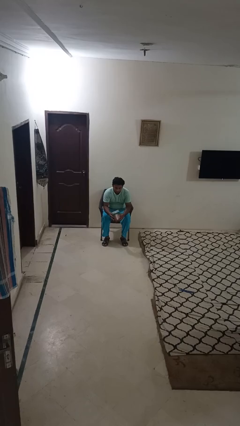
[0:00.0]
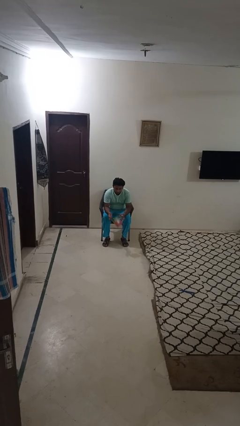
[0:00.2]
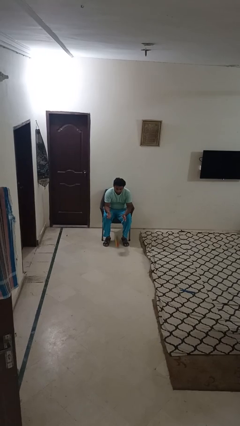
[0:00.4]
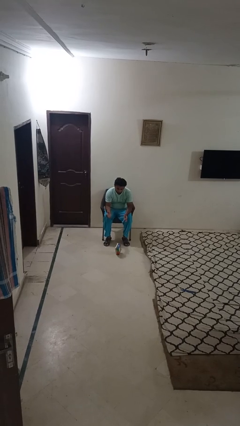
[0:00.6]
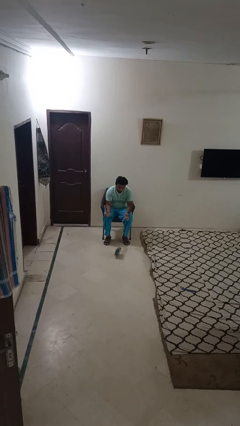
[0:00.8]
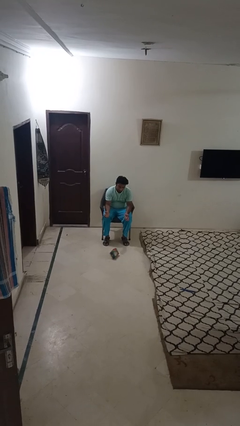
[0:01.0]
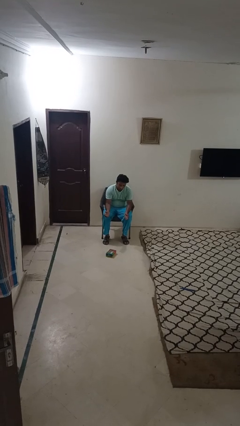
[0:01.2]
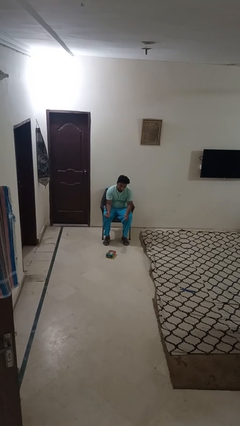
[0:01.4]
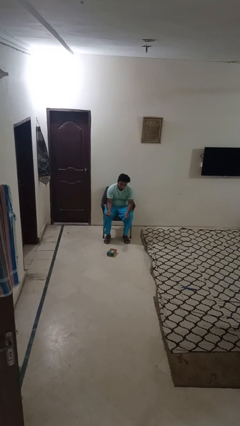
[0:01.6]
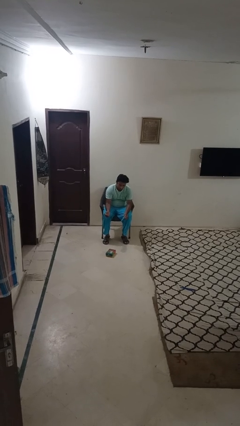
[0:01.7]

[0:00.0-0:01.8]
person drops object

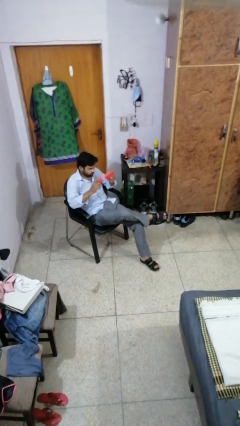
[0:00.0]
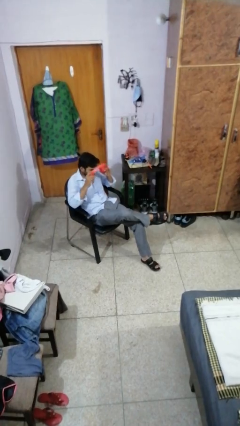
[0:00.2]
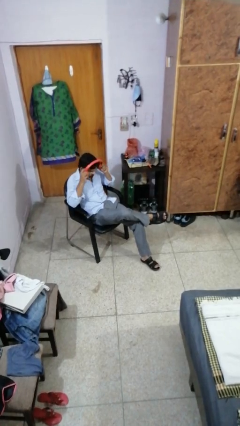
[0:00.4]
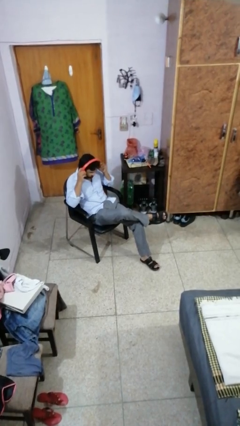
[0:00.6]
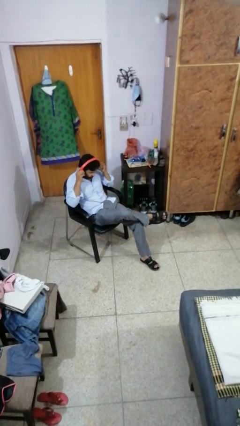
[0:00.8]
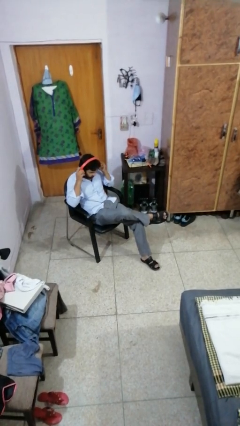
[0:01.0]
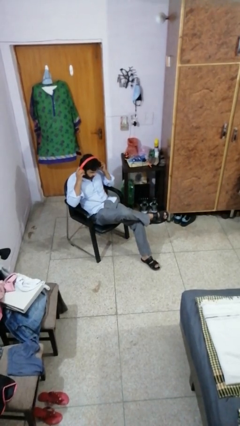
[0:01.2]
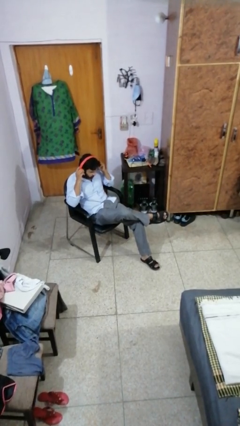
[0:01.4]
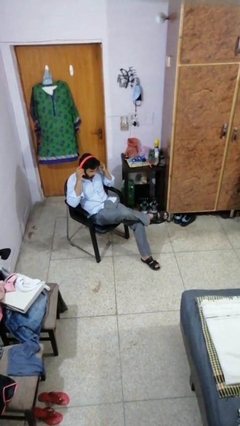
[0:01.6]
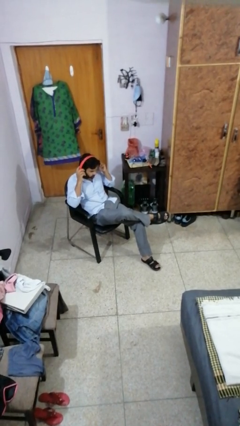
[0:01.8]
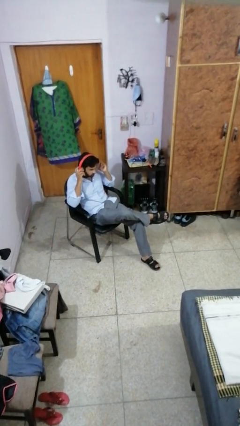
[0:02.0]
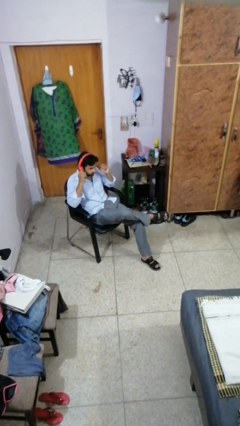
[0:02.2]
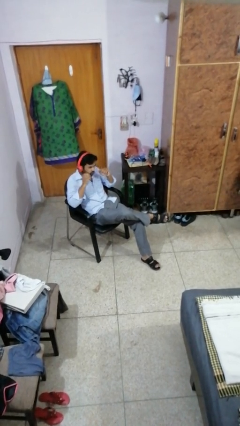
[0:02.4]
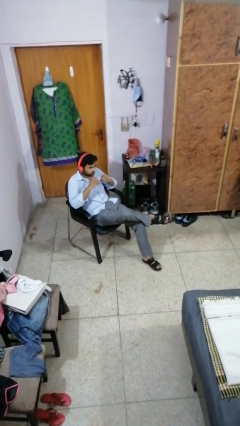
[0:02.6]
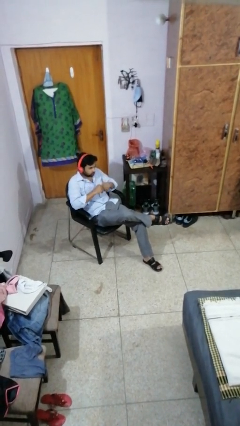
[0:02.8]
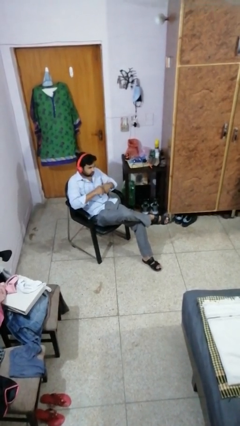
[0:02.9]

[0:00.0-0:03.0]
person puts on headphones

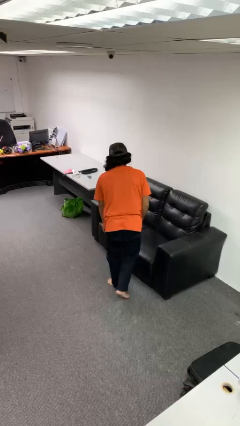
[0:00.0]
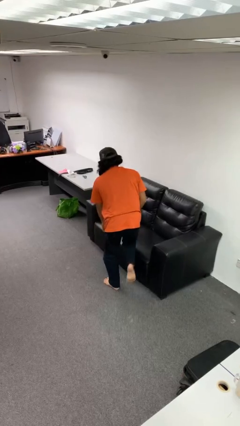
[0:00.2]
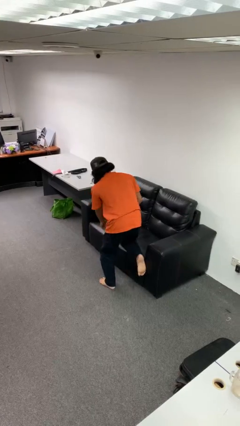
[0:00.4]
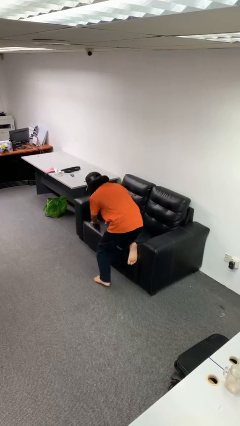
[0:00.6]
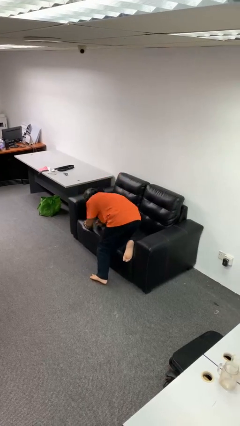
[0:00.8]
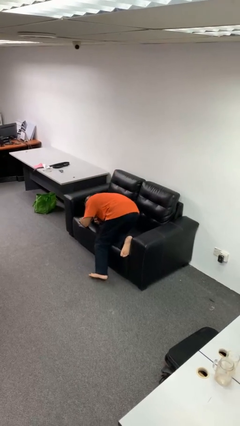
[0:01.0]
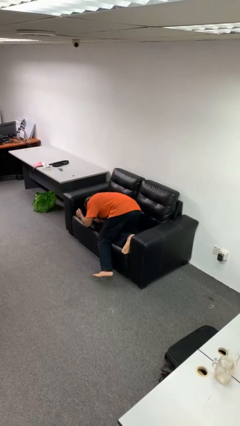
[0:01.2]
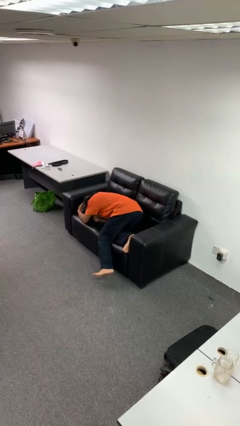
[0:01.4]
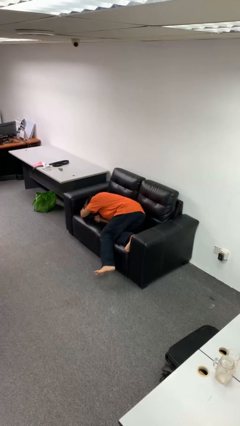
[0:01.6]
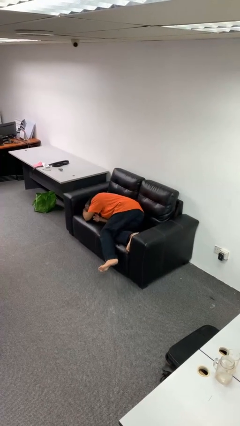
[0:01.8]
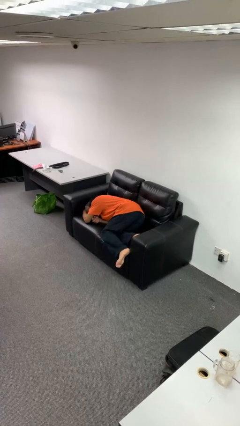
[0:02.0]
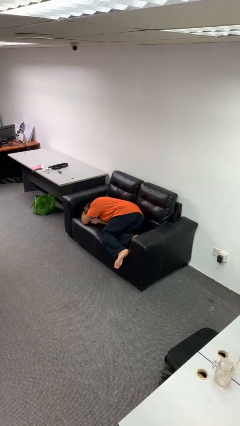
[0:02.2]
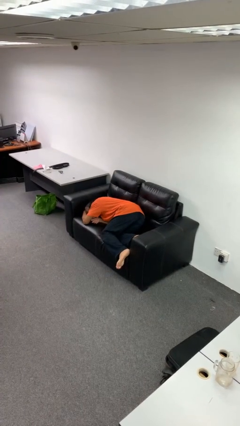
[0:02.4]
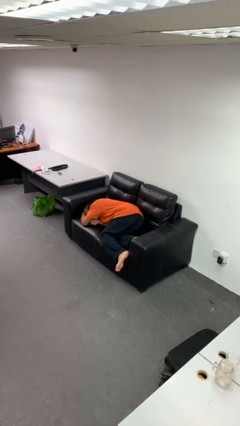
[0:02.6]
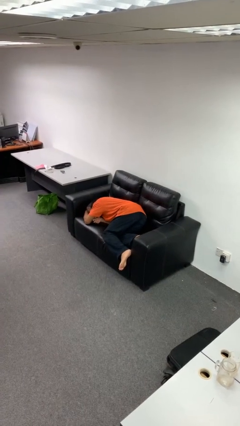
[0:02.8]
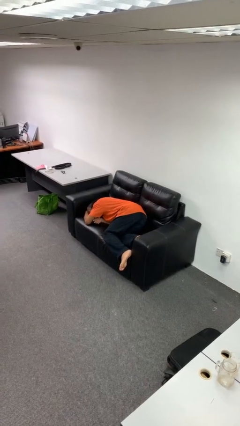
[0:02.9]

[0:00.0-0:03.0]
person lies down on couch

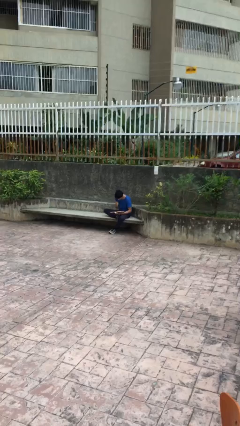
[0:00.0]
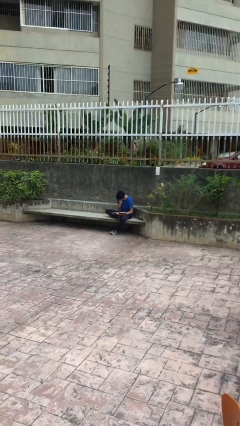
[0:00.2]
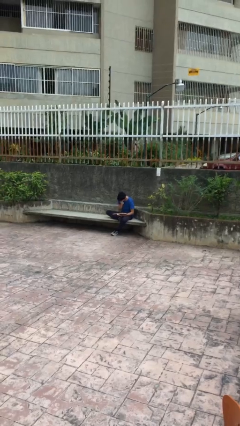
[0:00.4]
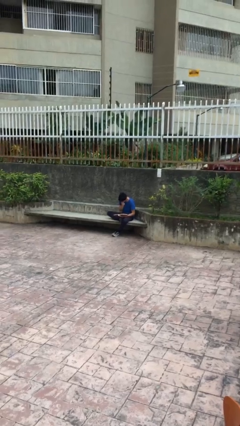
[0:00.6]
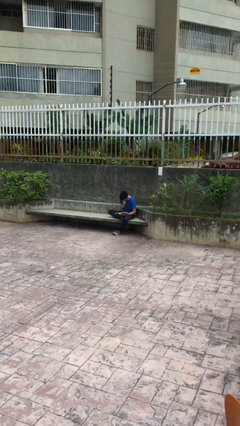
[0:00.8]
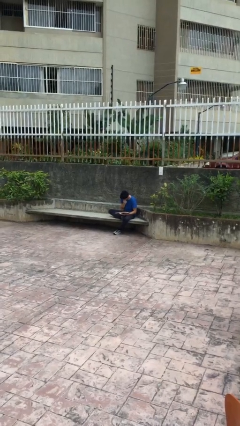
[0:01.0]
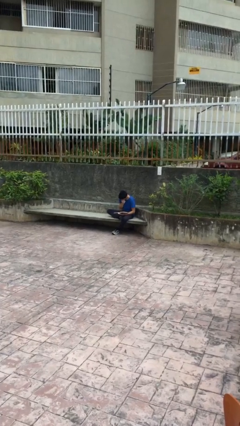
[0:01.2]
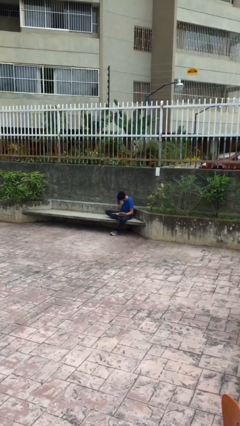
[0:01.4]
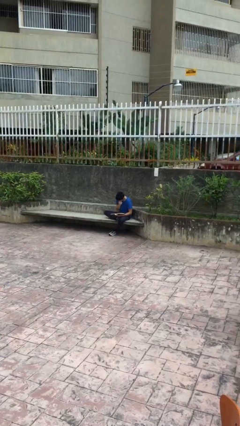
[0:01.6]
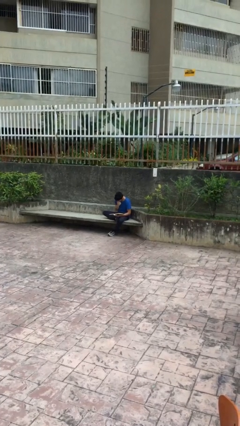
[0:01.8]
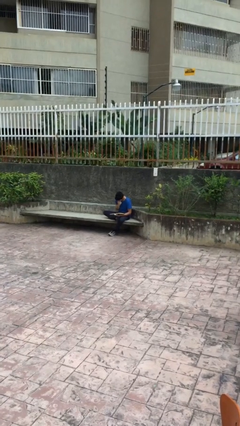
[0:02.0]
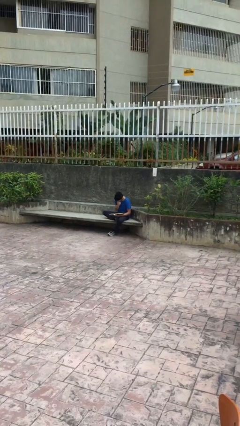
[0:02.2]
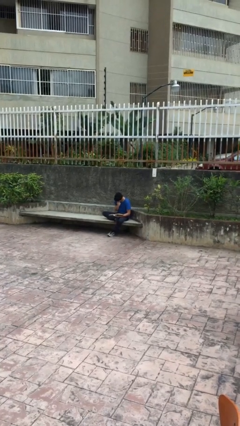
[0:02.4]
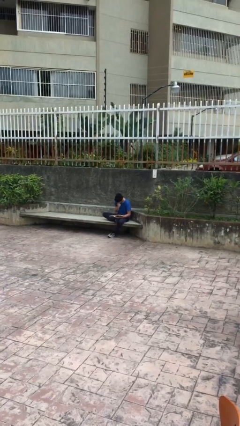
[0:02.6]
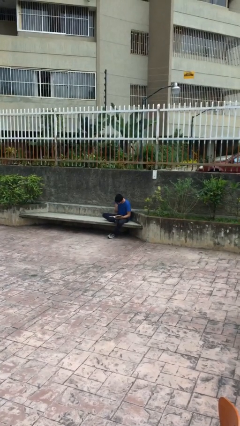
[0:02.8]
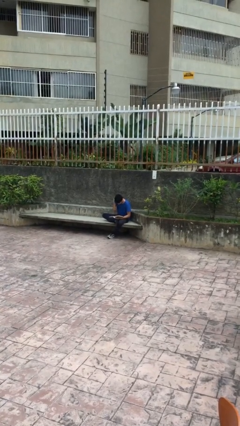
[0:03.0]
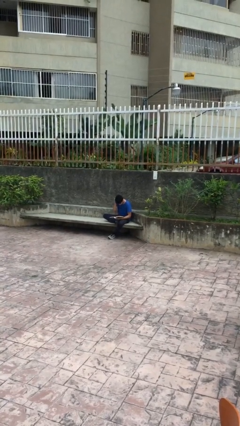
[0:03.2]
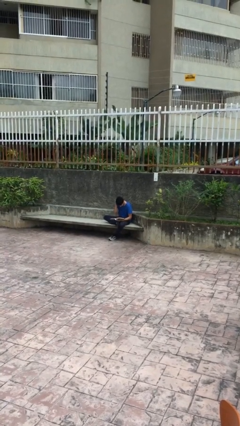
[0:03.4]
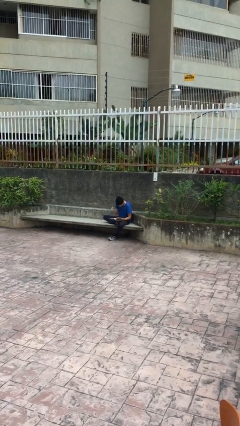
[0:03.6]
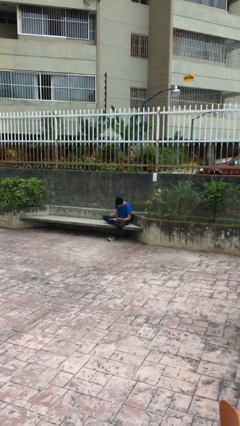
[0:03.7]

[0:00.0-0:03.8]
person reads document

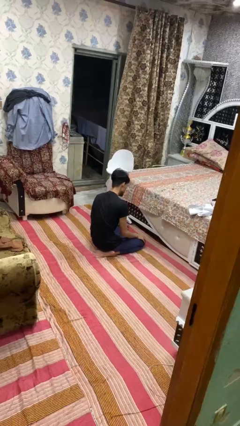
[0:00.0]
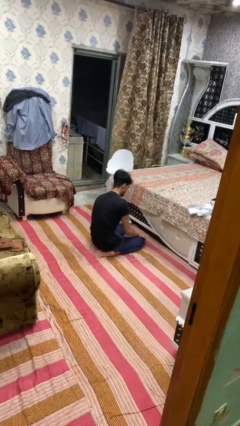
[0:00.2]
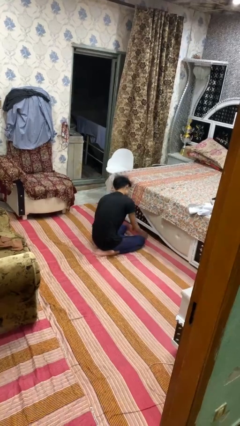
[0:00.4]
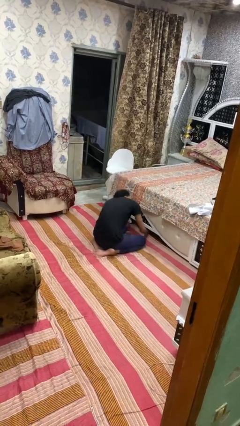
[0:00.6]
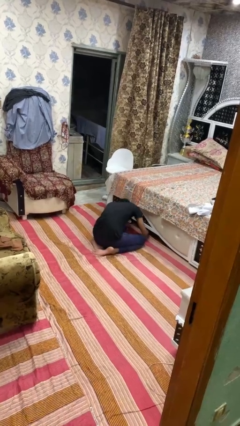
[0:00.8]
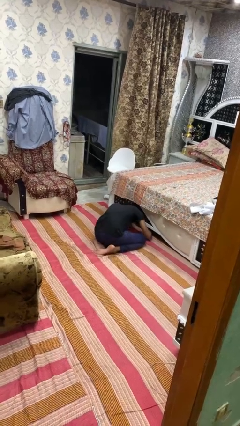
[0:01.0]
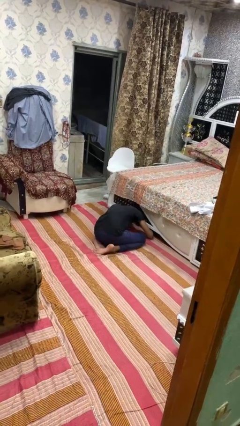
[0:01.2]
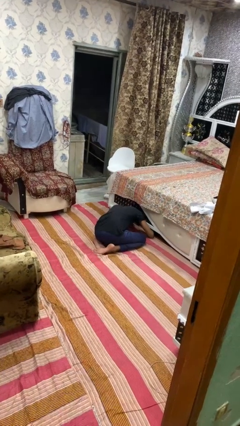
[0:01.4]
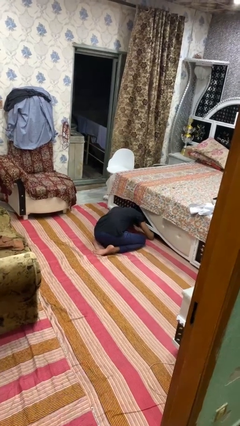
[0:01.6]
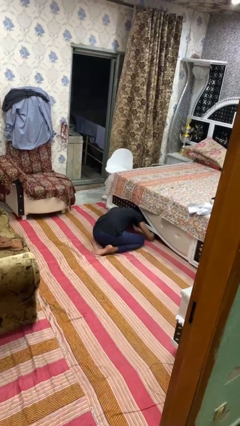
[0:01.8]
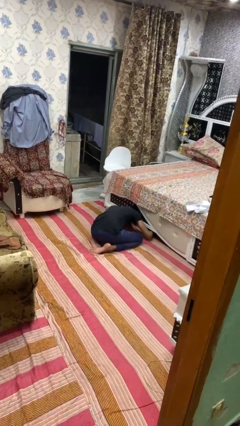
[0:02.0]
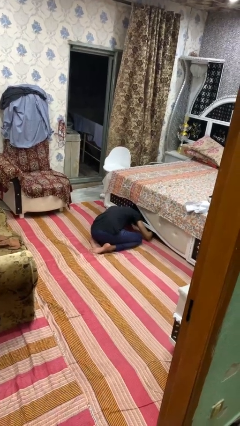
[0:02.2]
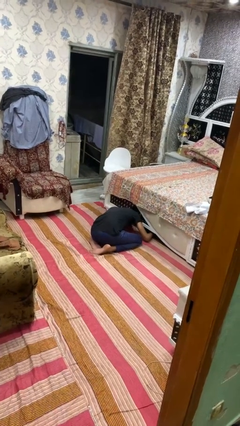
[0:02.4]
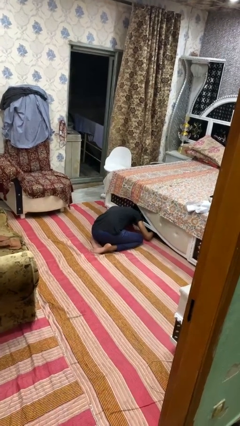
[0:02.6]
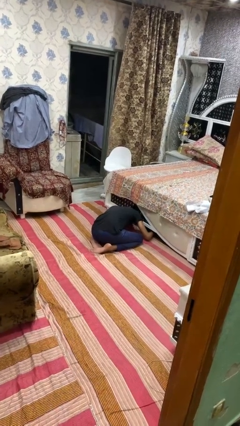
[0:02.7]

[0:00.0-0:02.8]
person searches under bed

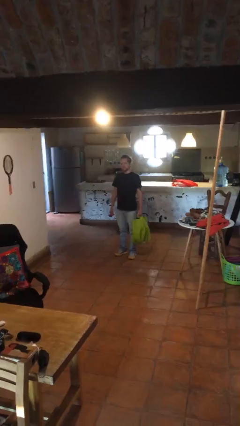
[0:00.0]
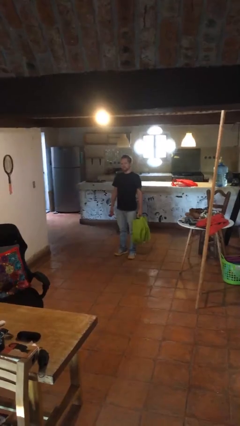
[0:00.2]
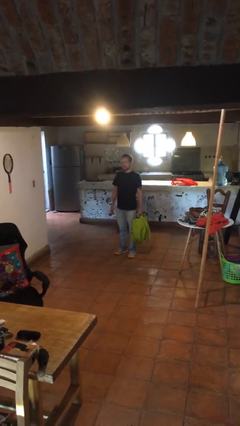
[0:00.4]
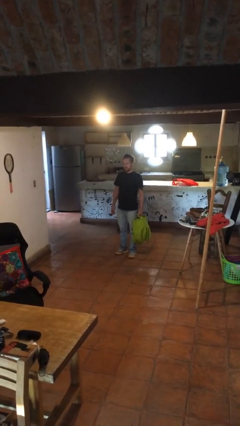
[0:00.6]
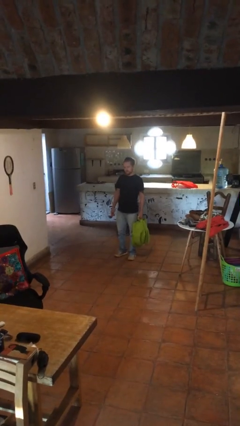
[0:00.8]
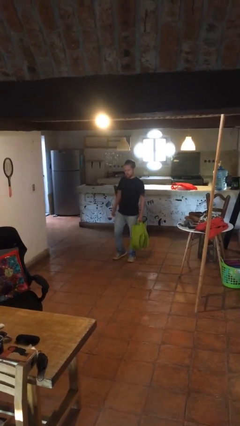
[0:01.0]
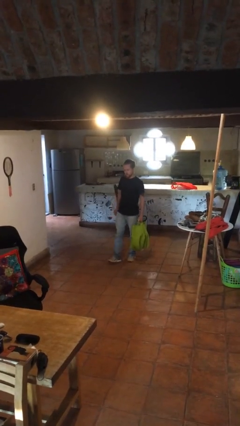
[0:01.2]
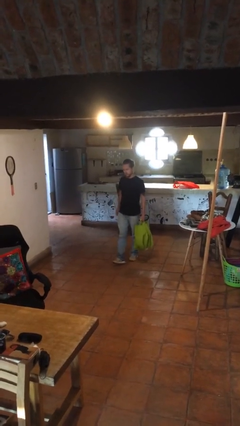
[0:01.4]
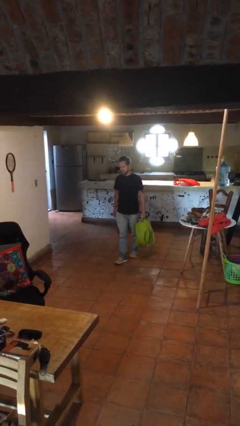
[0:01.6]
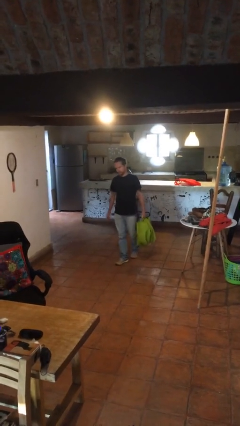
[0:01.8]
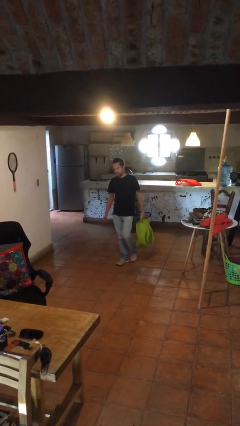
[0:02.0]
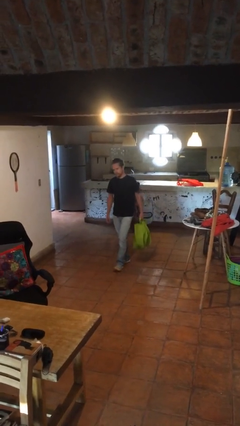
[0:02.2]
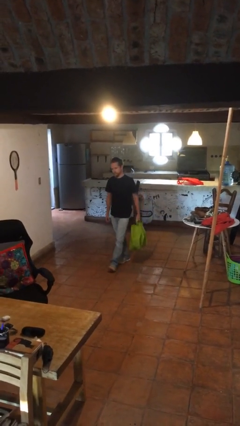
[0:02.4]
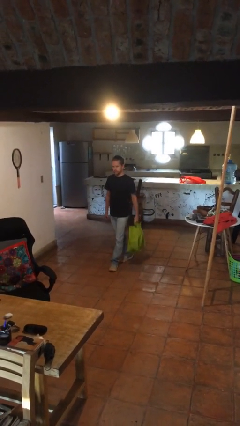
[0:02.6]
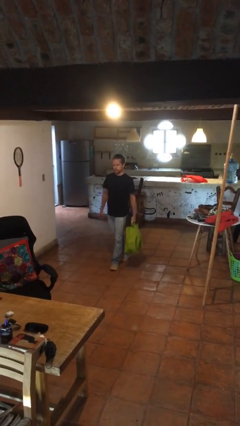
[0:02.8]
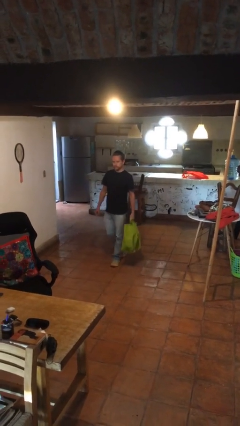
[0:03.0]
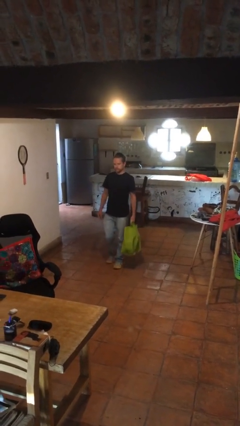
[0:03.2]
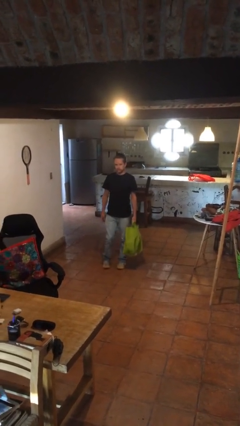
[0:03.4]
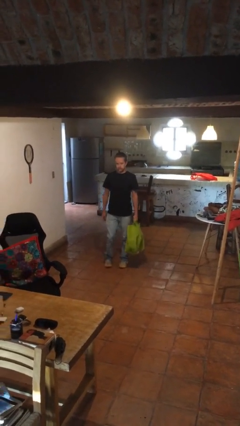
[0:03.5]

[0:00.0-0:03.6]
person carries groceries
